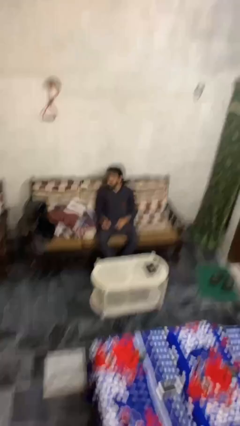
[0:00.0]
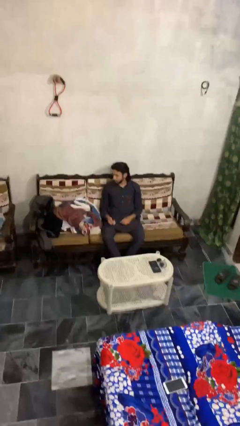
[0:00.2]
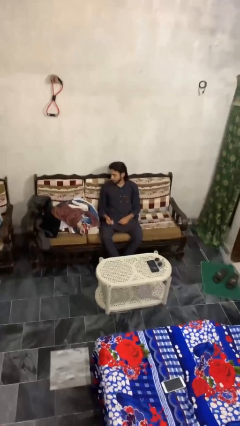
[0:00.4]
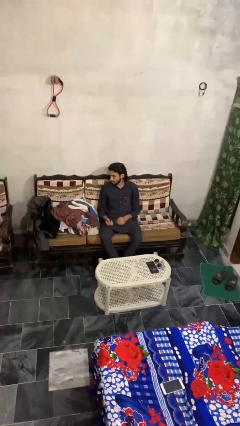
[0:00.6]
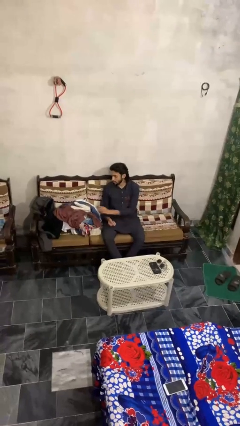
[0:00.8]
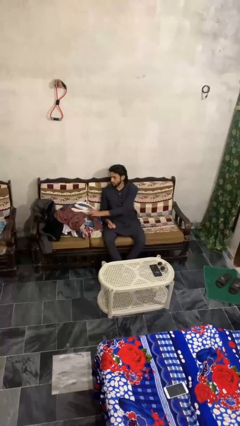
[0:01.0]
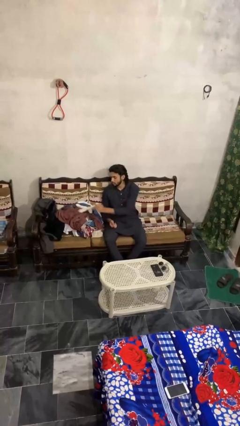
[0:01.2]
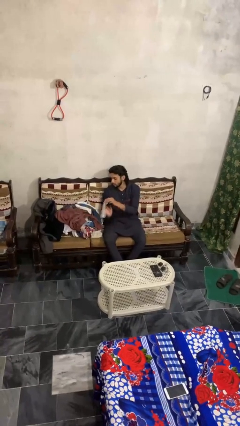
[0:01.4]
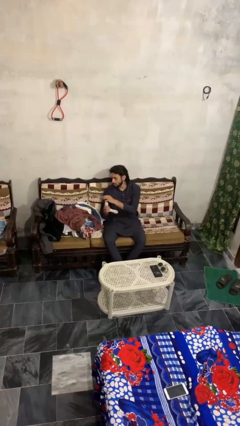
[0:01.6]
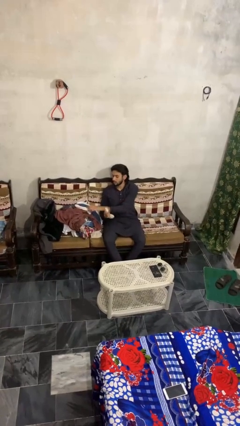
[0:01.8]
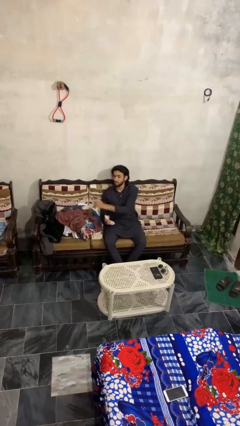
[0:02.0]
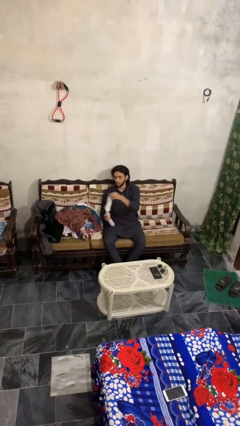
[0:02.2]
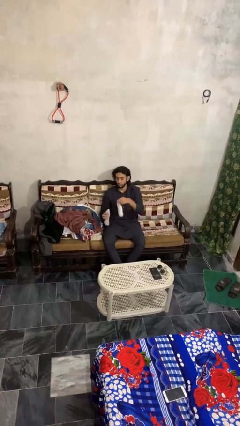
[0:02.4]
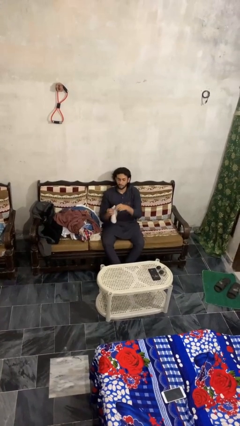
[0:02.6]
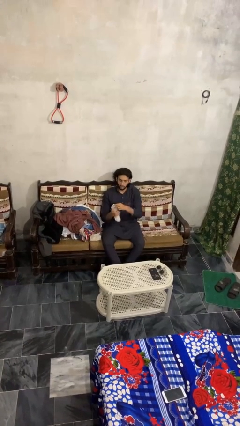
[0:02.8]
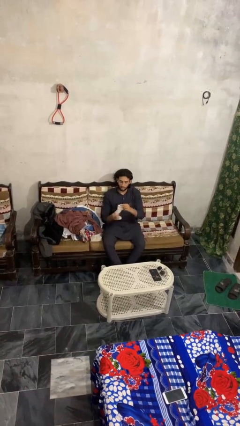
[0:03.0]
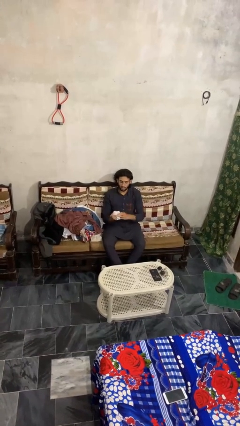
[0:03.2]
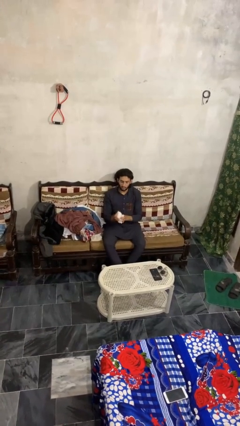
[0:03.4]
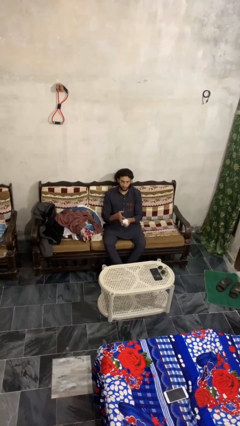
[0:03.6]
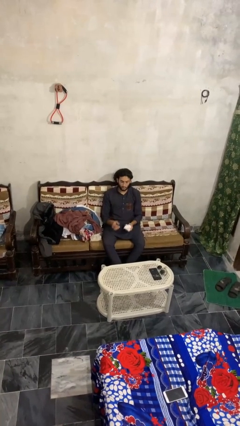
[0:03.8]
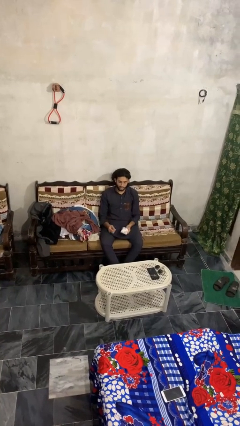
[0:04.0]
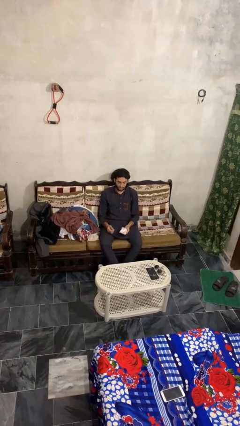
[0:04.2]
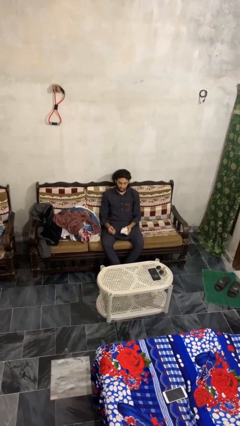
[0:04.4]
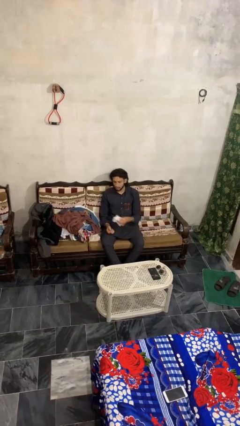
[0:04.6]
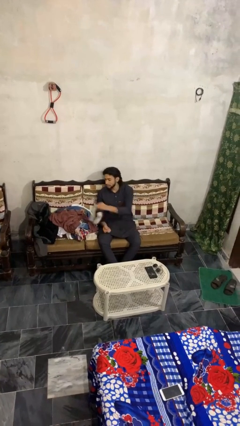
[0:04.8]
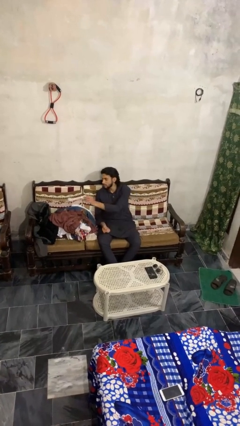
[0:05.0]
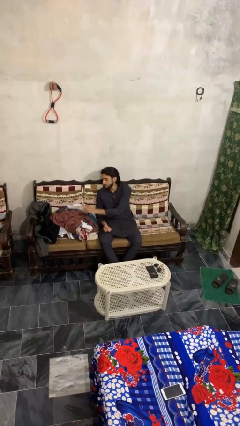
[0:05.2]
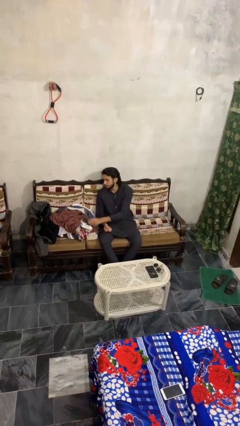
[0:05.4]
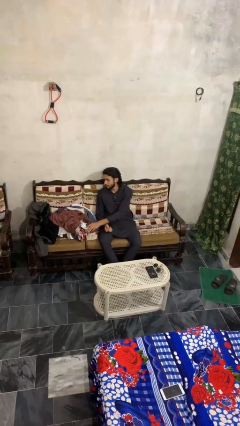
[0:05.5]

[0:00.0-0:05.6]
person folds socks

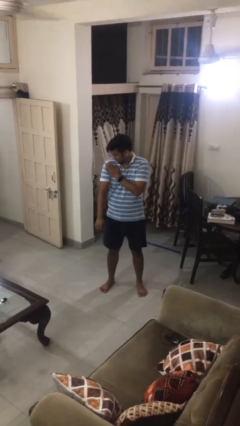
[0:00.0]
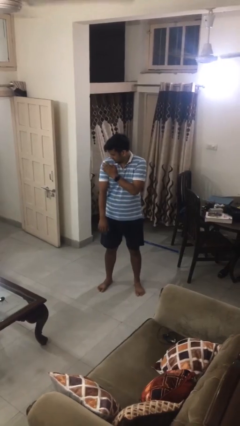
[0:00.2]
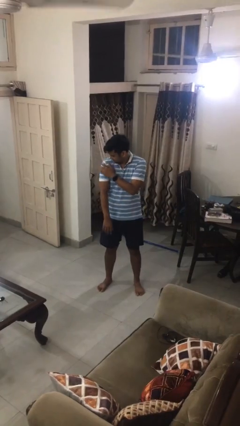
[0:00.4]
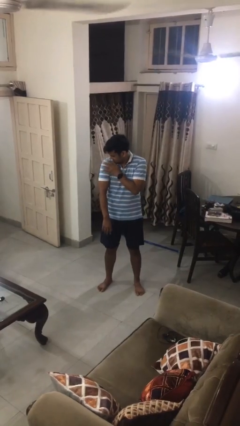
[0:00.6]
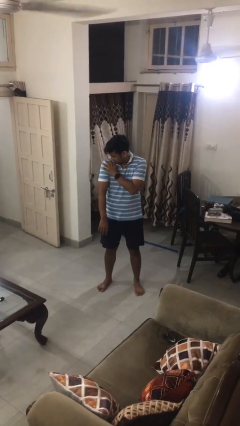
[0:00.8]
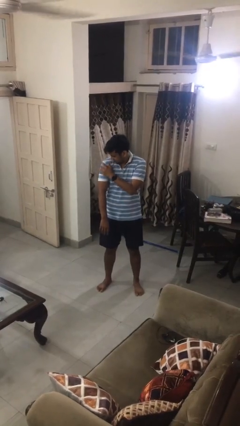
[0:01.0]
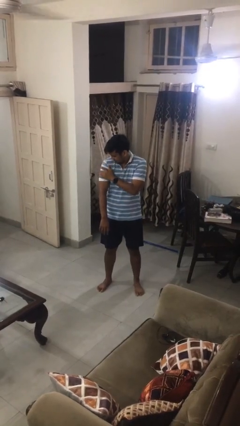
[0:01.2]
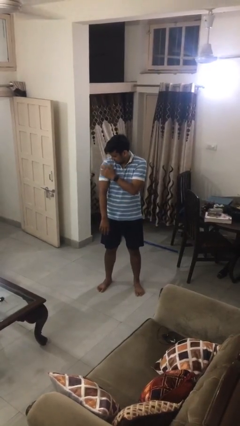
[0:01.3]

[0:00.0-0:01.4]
person swats bug

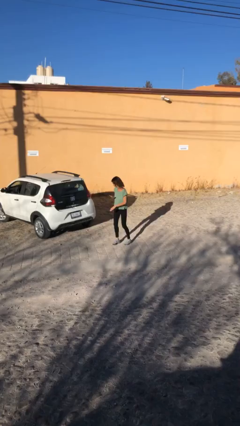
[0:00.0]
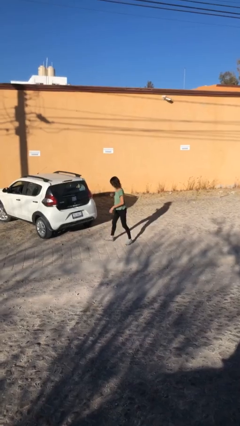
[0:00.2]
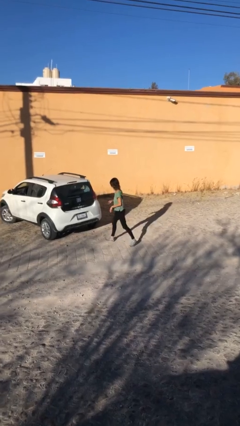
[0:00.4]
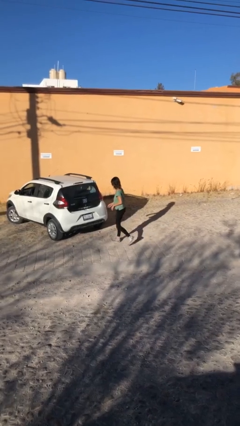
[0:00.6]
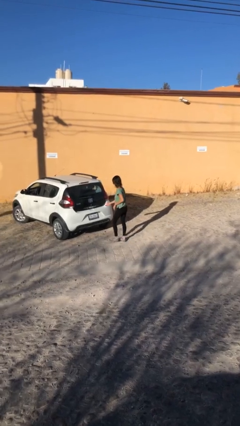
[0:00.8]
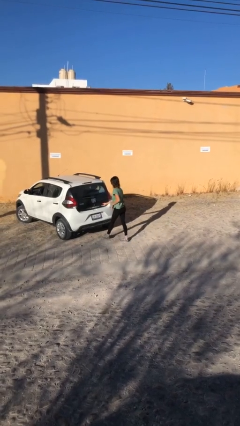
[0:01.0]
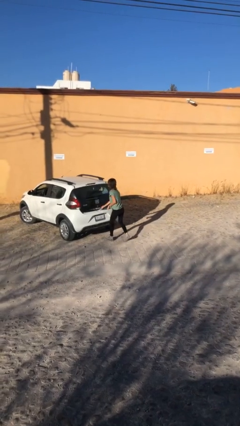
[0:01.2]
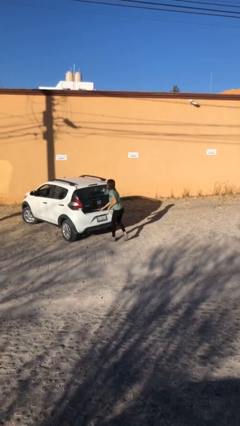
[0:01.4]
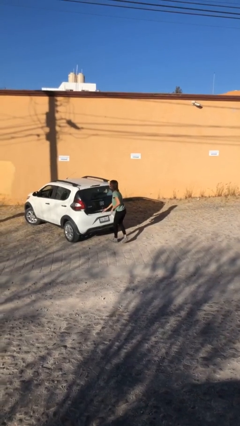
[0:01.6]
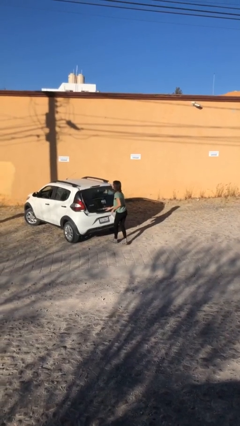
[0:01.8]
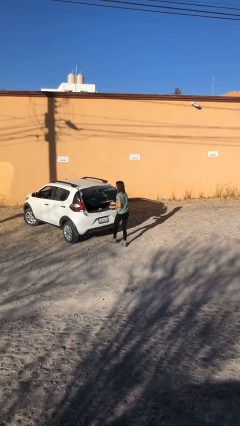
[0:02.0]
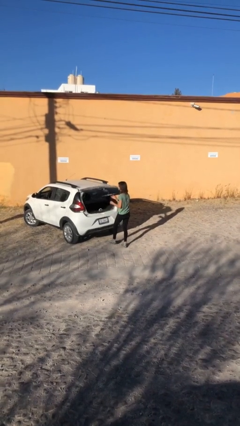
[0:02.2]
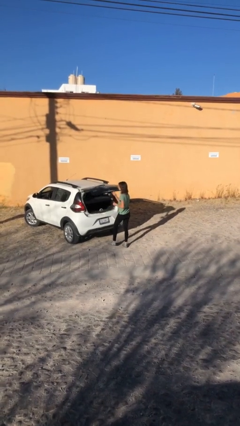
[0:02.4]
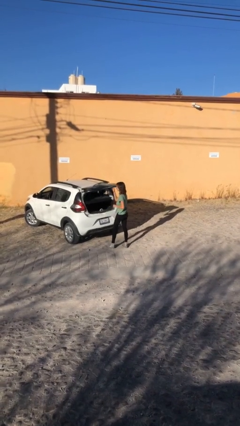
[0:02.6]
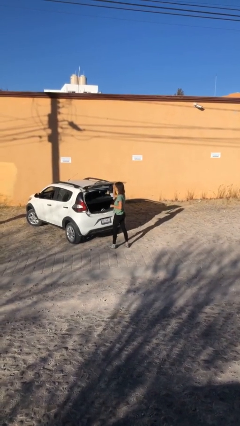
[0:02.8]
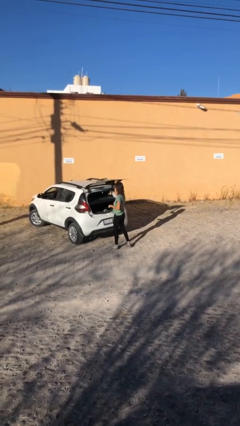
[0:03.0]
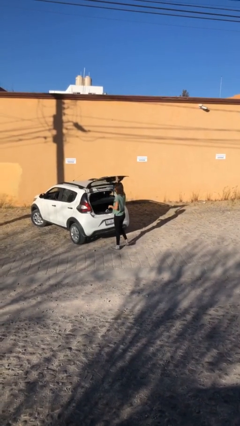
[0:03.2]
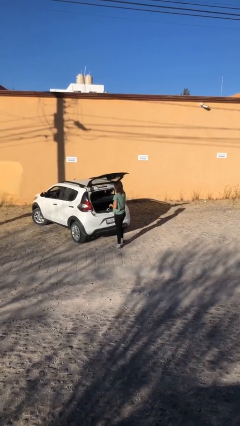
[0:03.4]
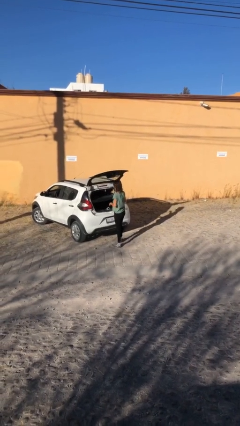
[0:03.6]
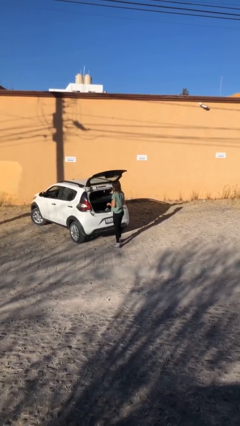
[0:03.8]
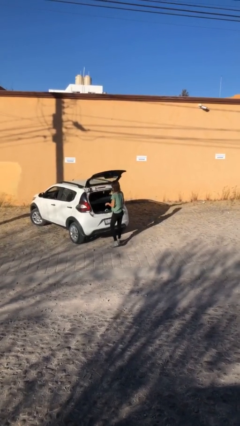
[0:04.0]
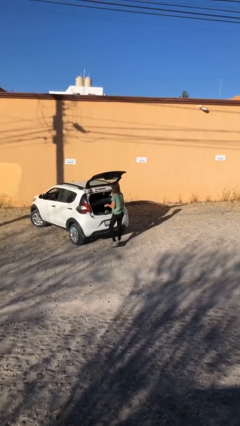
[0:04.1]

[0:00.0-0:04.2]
person opens car trunk

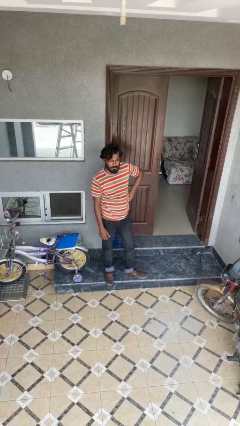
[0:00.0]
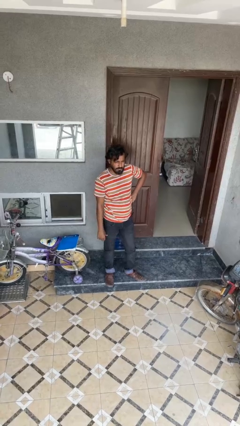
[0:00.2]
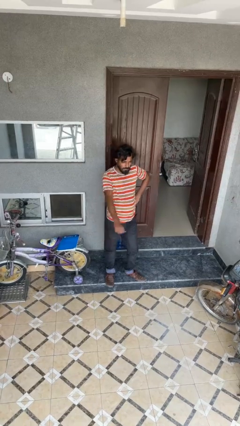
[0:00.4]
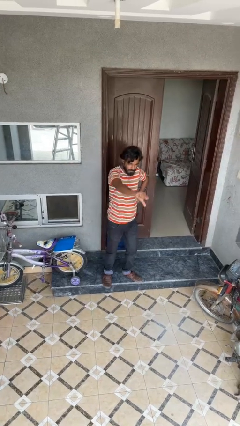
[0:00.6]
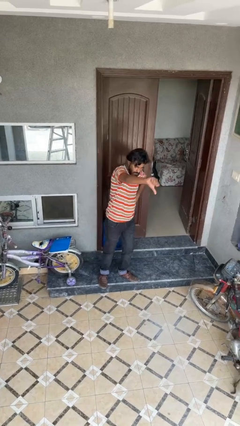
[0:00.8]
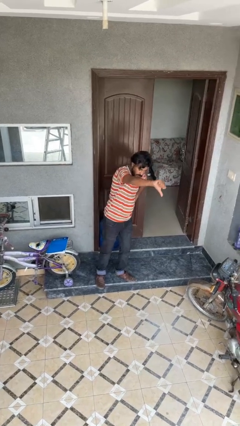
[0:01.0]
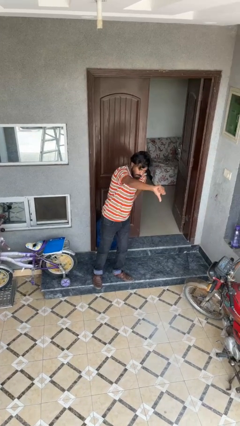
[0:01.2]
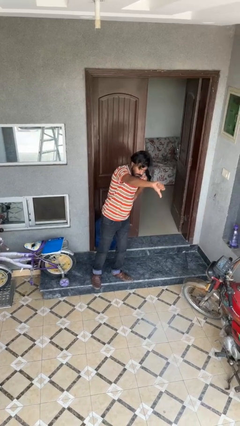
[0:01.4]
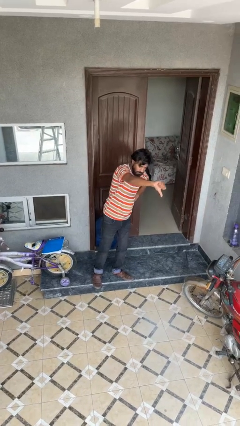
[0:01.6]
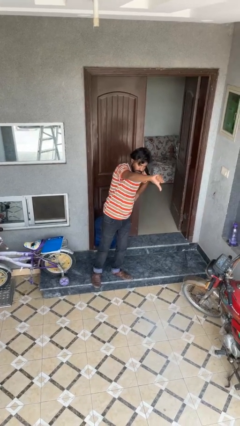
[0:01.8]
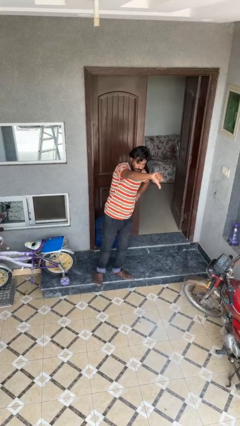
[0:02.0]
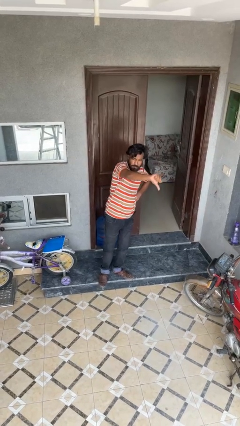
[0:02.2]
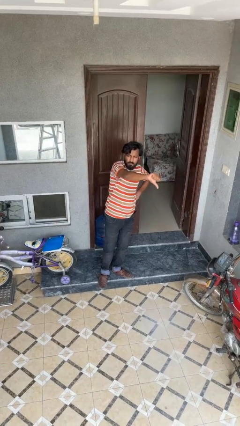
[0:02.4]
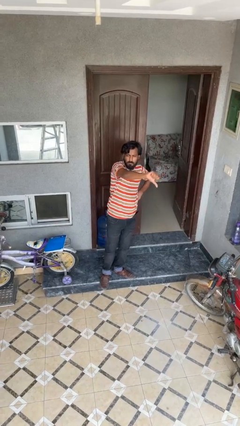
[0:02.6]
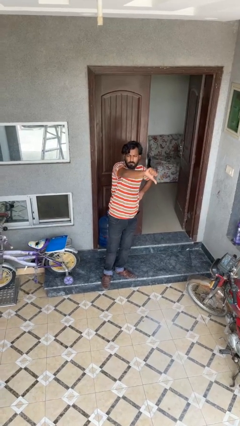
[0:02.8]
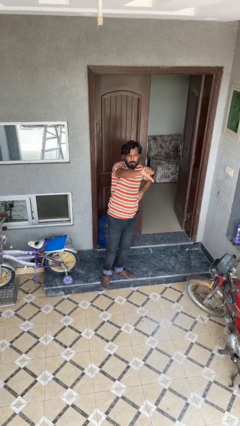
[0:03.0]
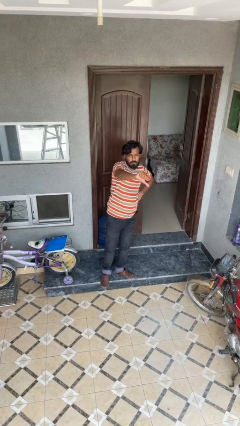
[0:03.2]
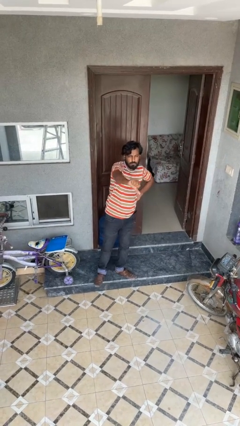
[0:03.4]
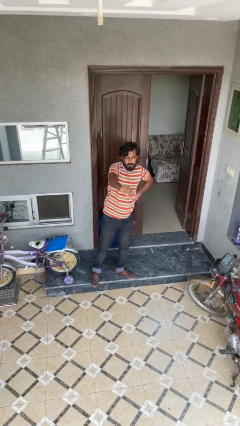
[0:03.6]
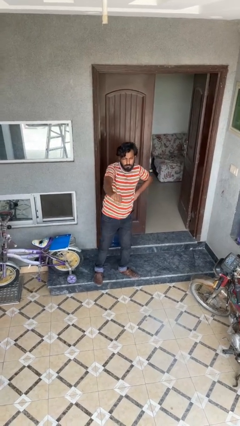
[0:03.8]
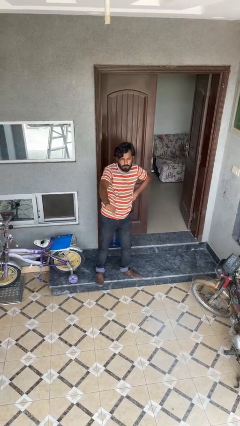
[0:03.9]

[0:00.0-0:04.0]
person gestures thumbs down

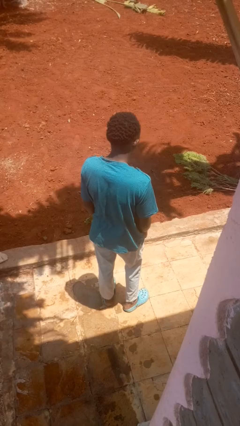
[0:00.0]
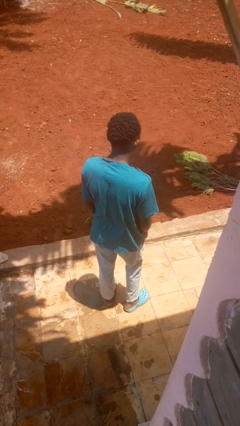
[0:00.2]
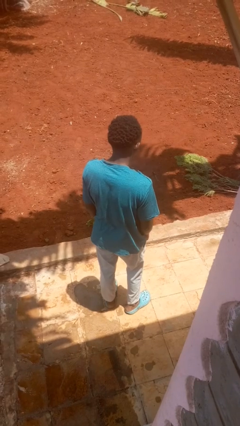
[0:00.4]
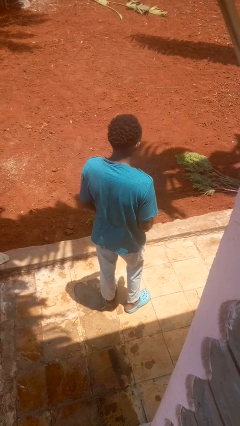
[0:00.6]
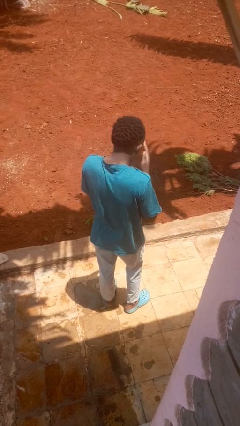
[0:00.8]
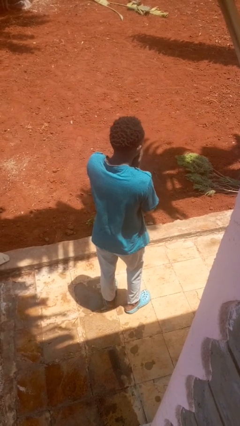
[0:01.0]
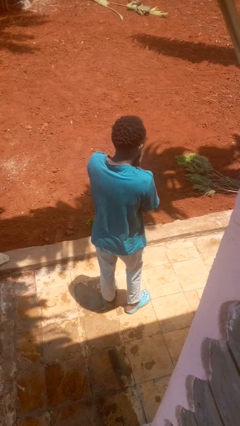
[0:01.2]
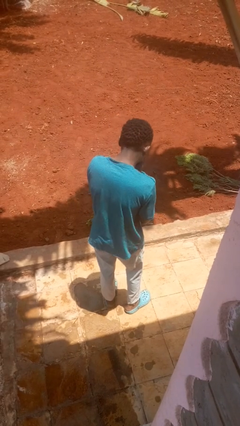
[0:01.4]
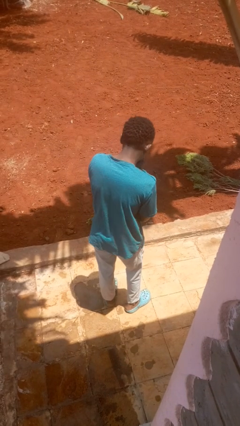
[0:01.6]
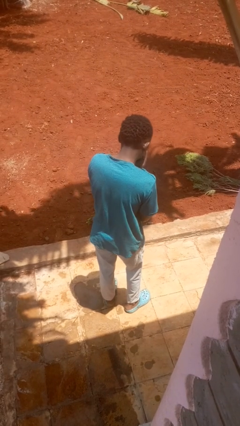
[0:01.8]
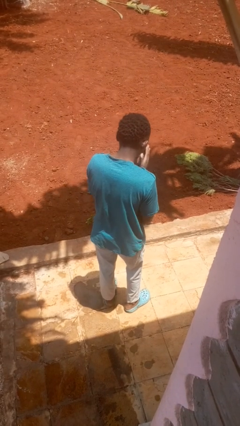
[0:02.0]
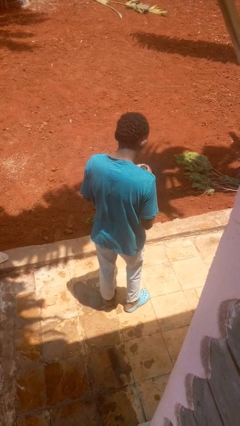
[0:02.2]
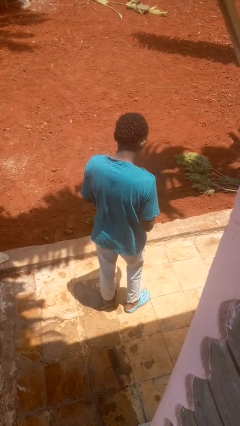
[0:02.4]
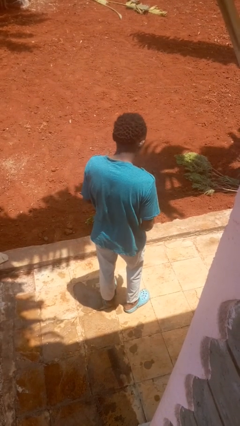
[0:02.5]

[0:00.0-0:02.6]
person sneezes into hand
